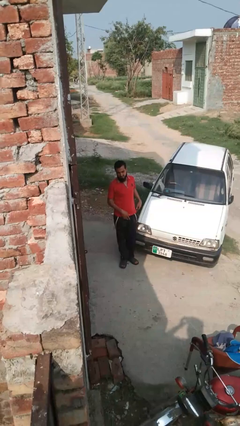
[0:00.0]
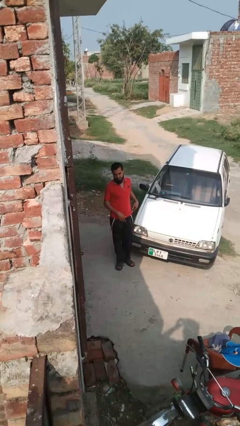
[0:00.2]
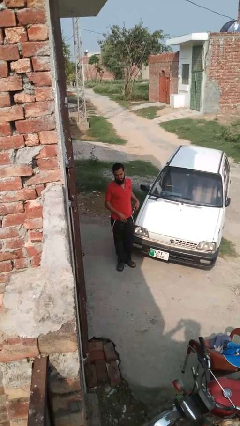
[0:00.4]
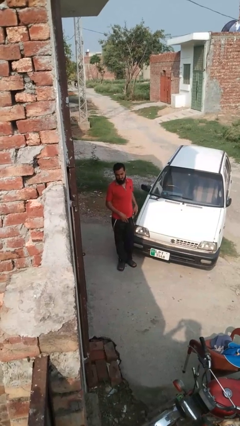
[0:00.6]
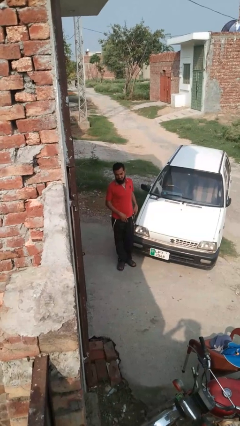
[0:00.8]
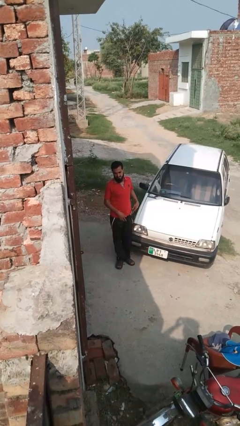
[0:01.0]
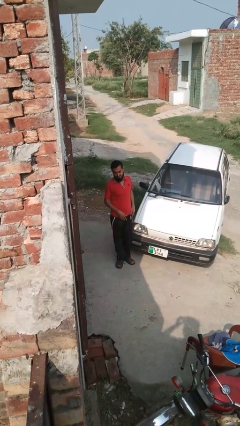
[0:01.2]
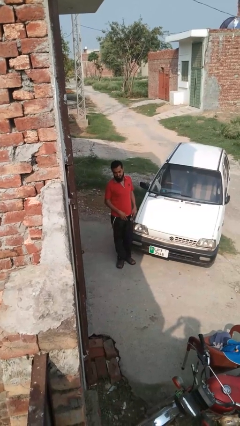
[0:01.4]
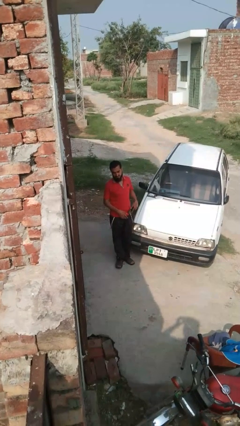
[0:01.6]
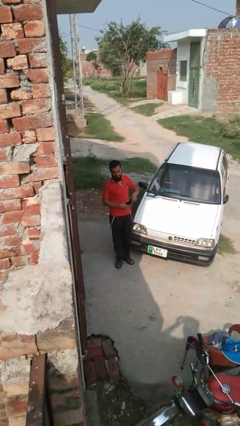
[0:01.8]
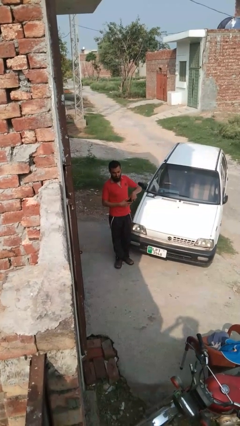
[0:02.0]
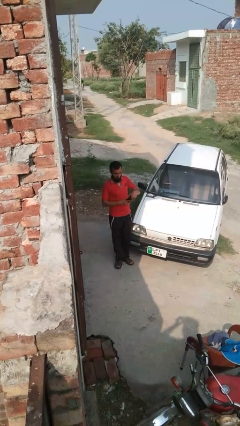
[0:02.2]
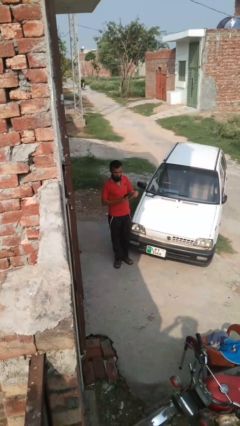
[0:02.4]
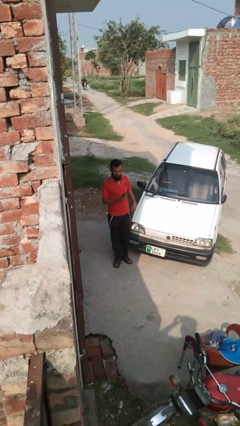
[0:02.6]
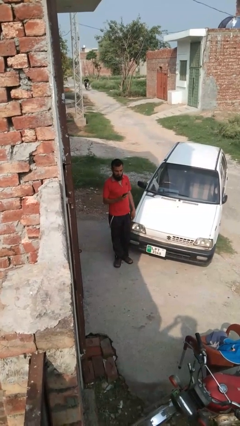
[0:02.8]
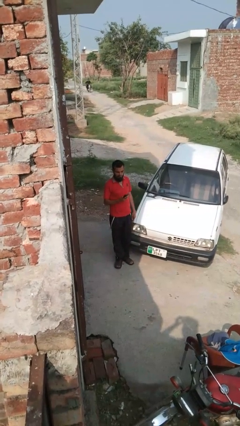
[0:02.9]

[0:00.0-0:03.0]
person takes phone from pocket

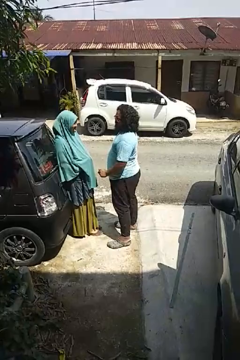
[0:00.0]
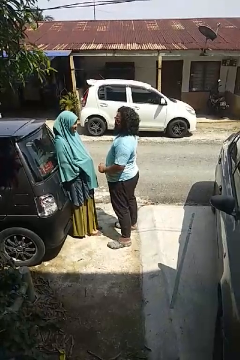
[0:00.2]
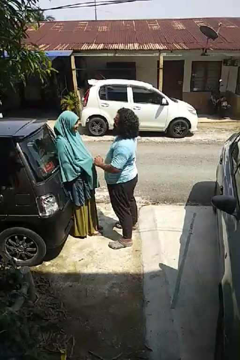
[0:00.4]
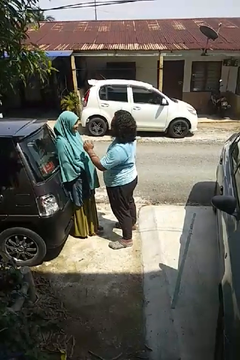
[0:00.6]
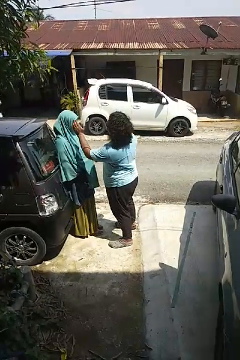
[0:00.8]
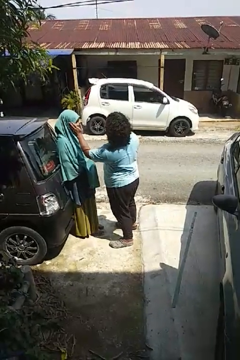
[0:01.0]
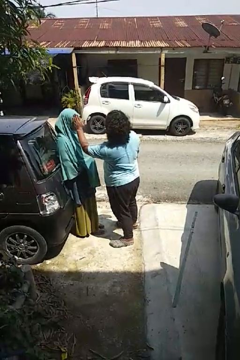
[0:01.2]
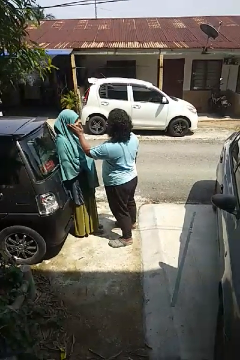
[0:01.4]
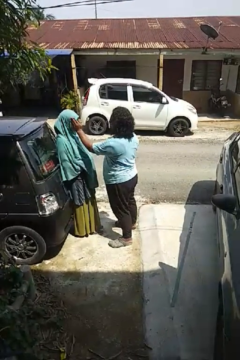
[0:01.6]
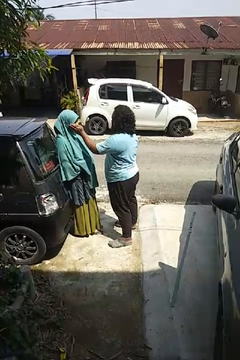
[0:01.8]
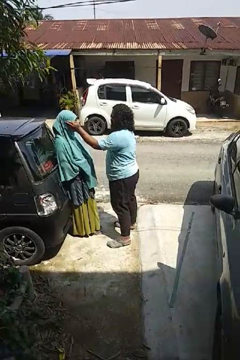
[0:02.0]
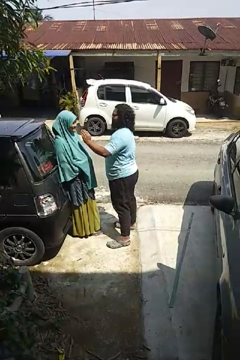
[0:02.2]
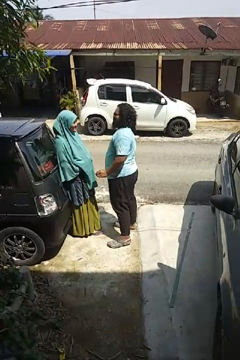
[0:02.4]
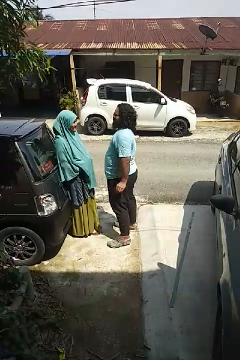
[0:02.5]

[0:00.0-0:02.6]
person touches face of person

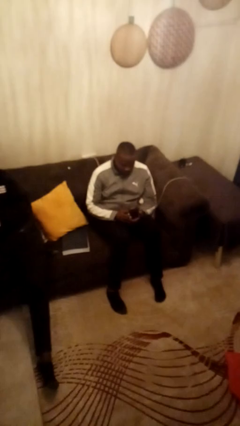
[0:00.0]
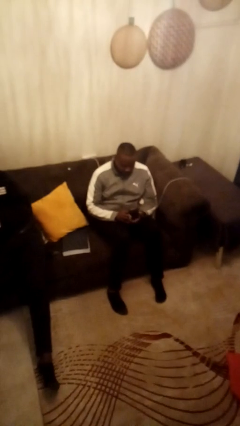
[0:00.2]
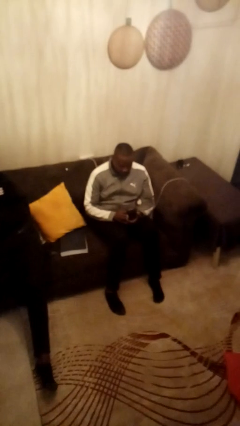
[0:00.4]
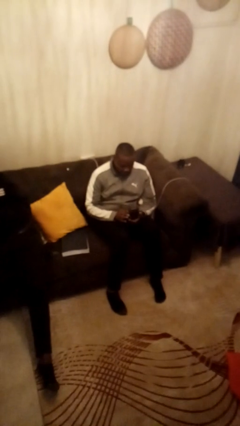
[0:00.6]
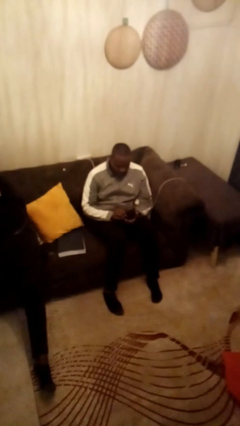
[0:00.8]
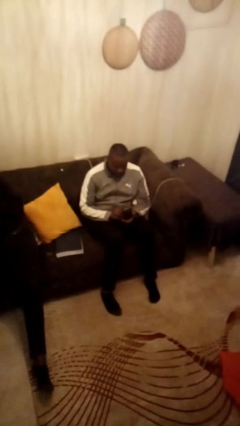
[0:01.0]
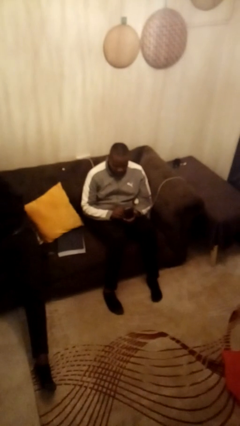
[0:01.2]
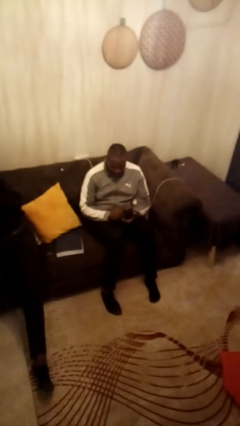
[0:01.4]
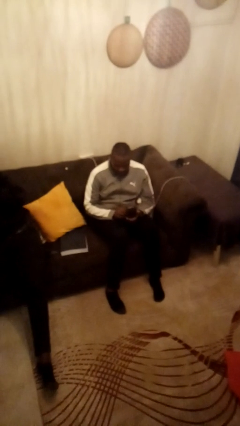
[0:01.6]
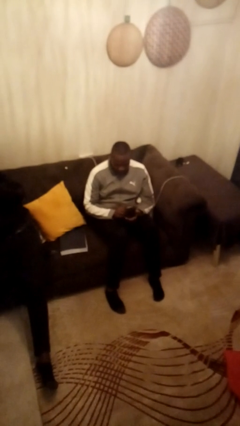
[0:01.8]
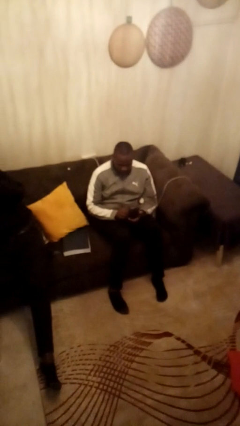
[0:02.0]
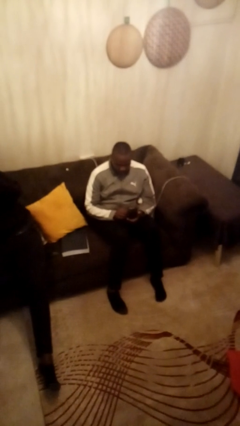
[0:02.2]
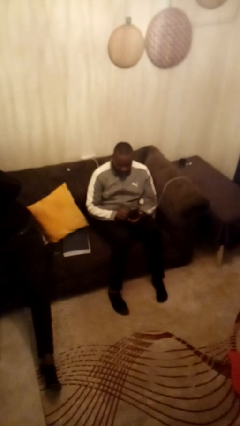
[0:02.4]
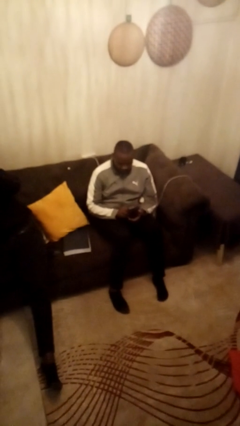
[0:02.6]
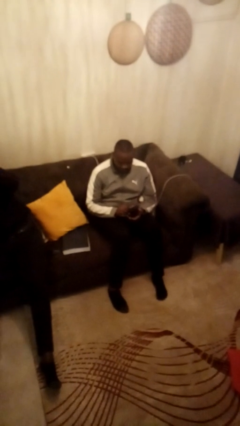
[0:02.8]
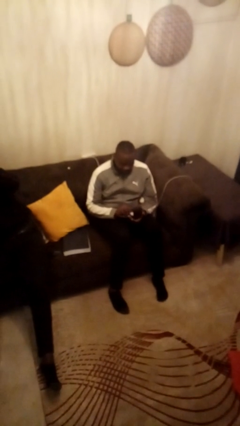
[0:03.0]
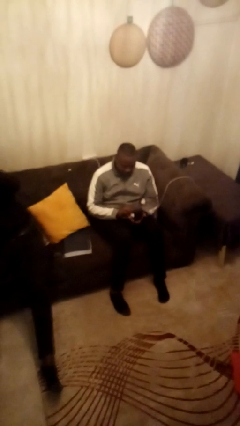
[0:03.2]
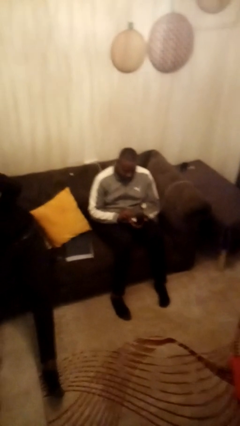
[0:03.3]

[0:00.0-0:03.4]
person searches jewelry box

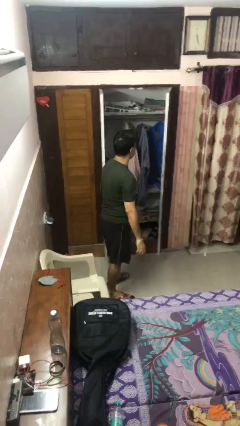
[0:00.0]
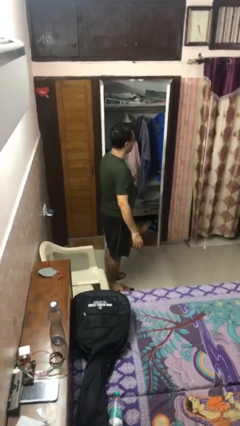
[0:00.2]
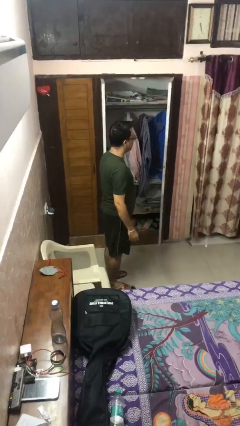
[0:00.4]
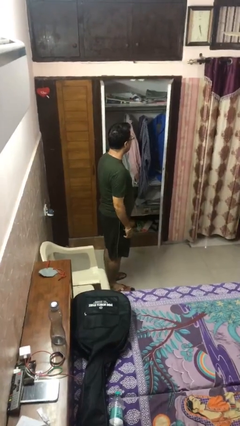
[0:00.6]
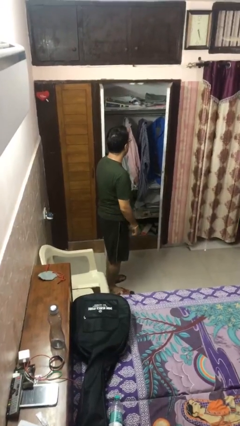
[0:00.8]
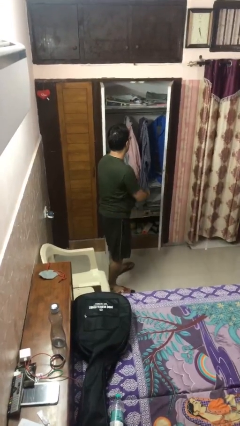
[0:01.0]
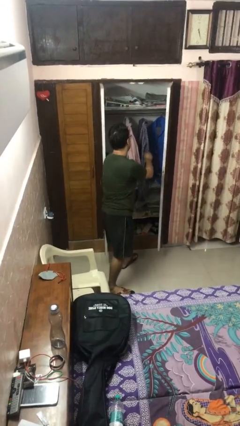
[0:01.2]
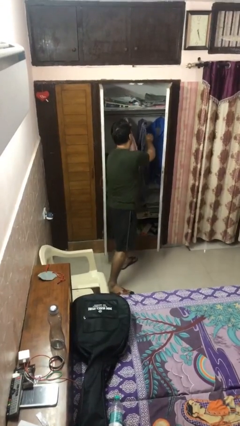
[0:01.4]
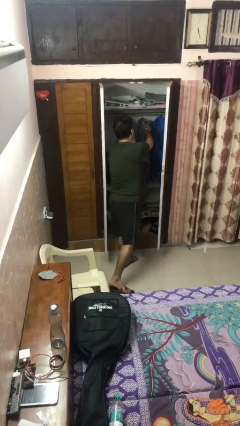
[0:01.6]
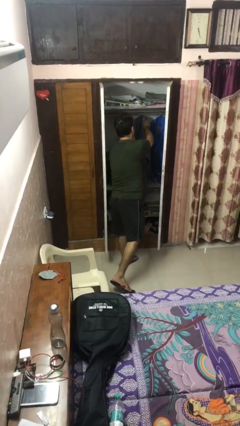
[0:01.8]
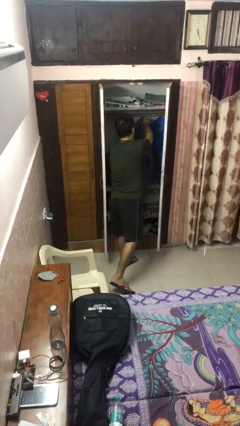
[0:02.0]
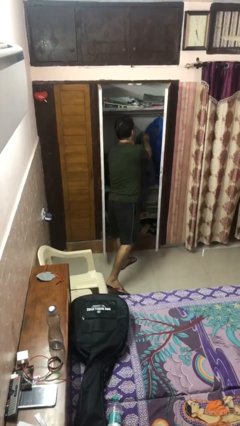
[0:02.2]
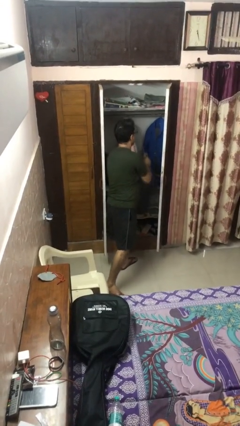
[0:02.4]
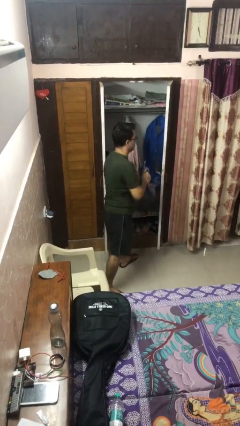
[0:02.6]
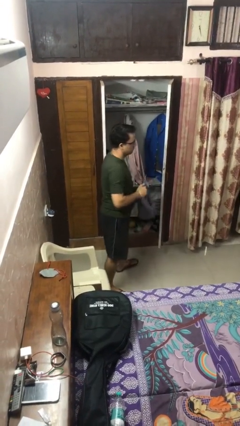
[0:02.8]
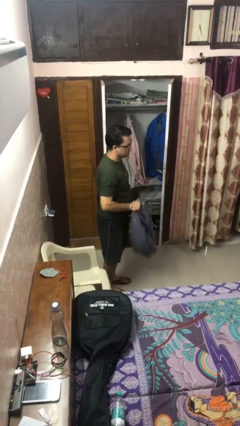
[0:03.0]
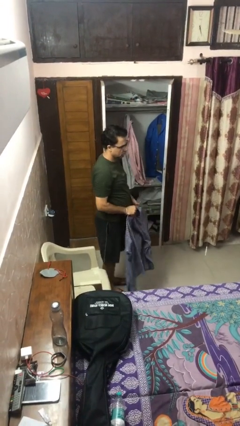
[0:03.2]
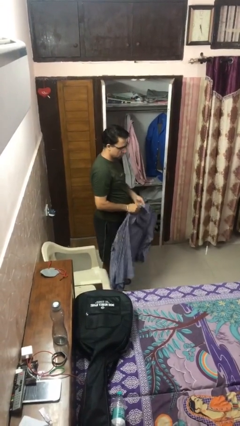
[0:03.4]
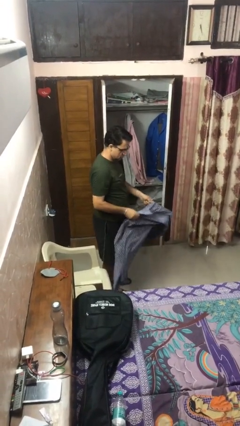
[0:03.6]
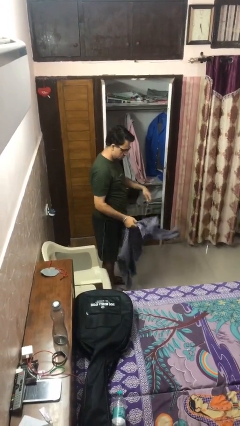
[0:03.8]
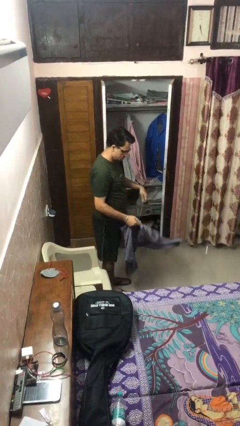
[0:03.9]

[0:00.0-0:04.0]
person takes clothes from closet

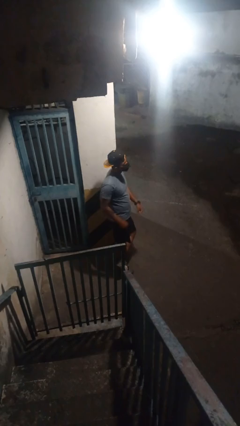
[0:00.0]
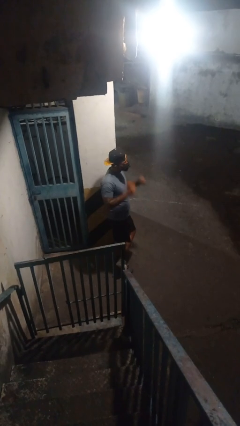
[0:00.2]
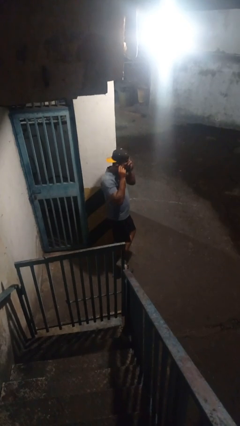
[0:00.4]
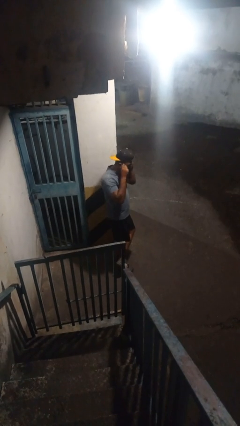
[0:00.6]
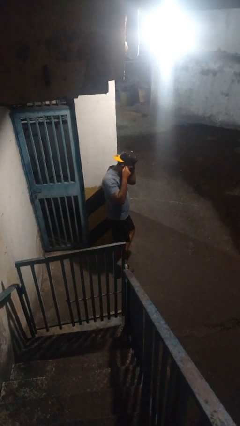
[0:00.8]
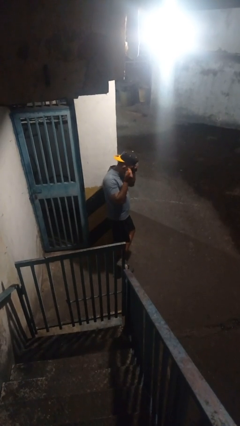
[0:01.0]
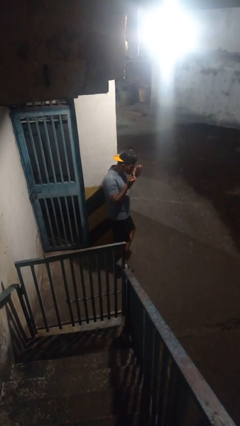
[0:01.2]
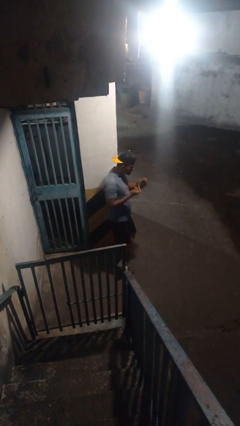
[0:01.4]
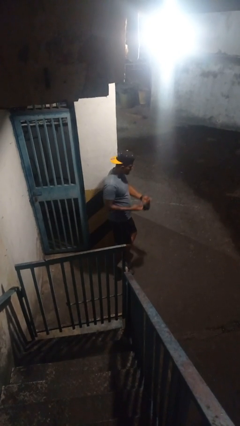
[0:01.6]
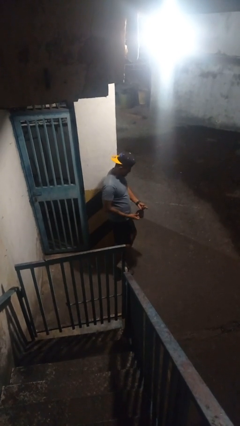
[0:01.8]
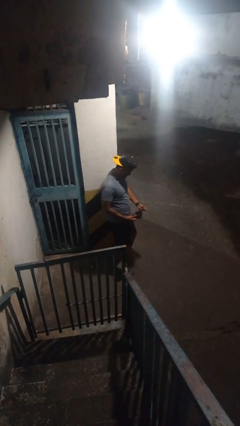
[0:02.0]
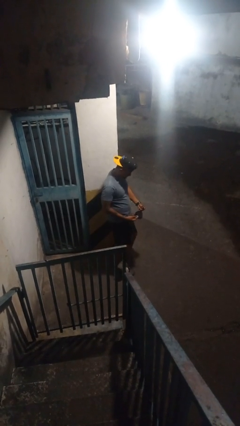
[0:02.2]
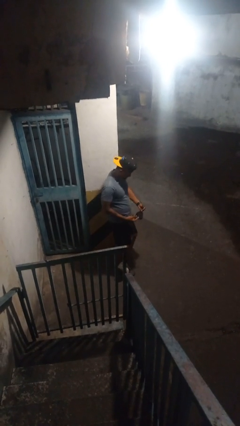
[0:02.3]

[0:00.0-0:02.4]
person takes off facemask

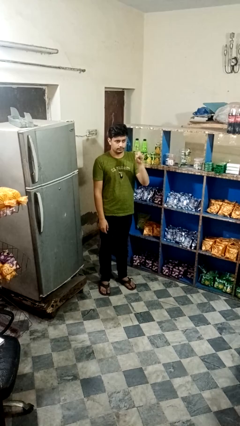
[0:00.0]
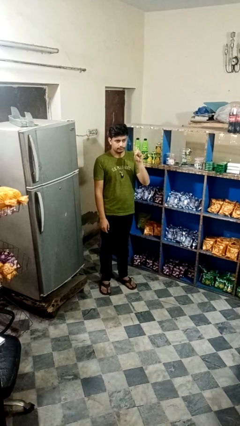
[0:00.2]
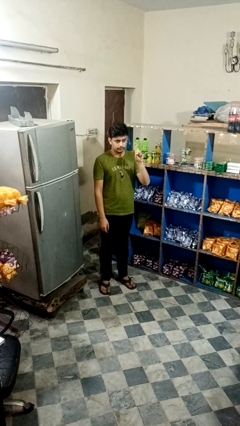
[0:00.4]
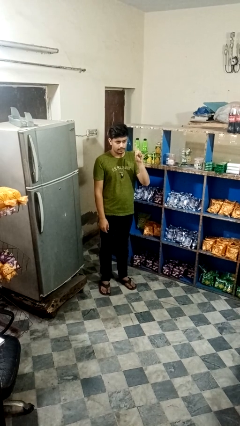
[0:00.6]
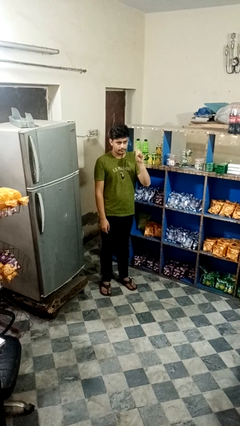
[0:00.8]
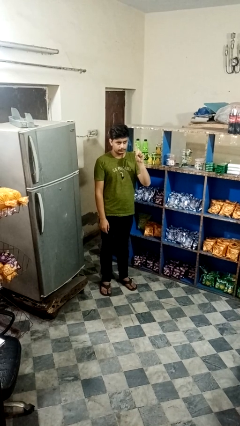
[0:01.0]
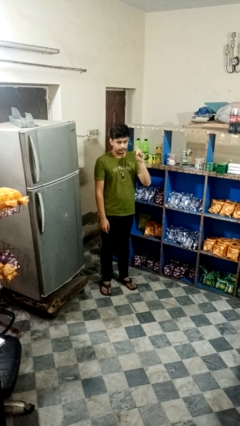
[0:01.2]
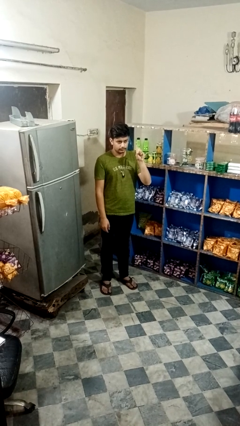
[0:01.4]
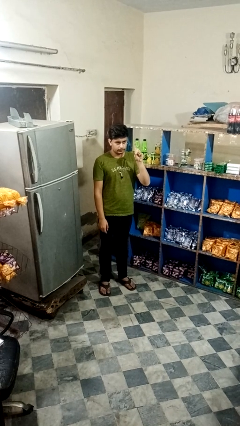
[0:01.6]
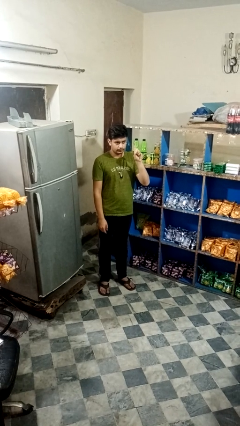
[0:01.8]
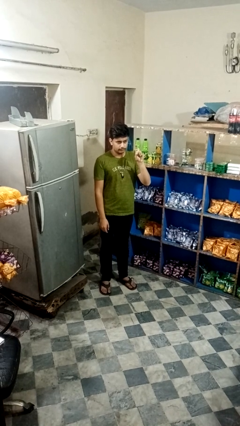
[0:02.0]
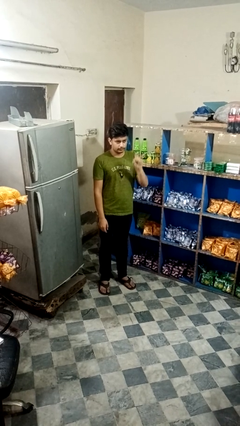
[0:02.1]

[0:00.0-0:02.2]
person gestures number one

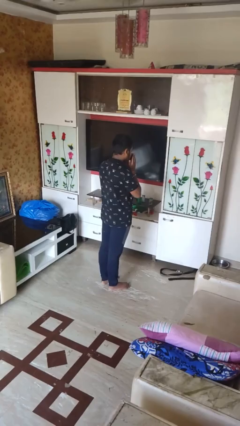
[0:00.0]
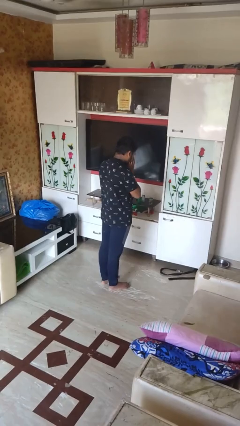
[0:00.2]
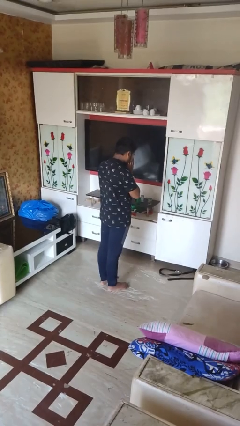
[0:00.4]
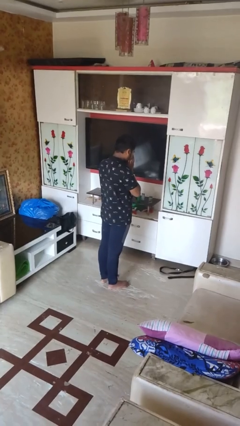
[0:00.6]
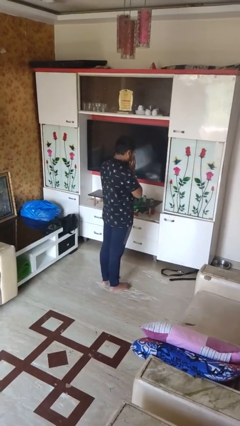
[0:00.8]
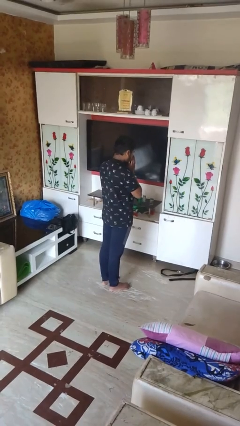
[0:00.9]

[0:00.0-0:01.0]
person sneezes into hand
